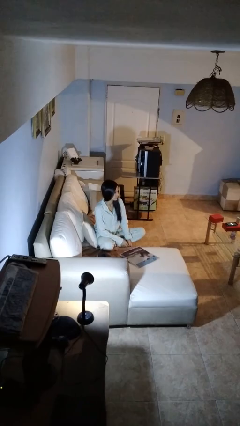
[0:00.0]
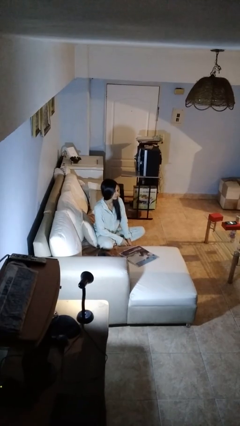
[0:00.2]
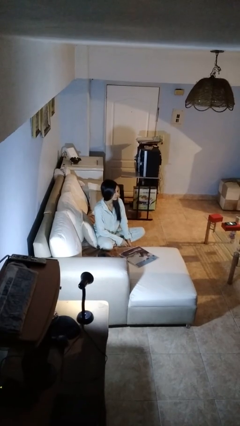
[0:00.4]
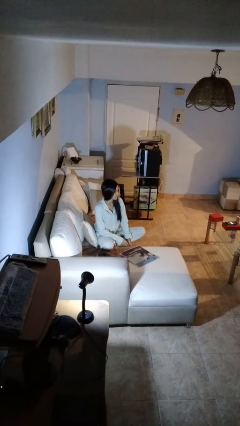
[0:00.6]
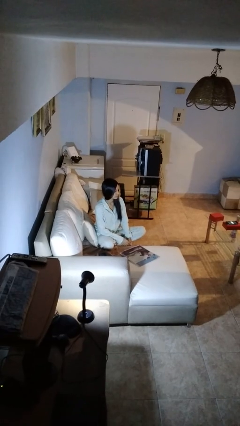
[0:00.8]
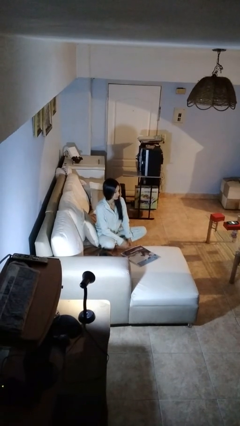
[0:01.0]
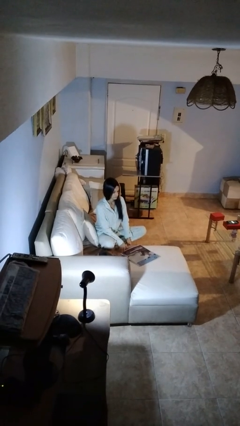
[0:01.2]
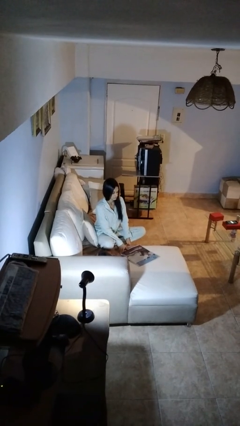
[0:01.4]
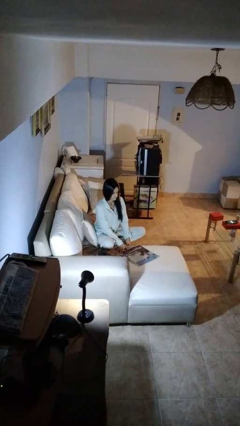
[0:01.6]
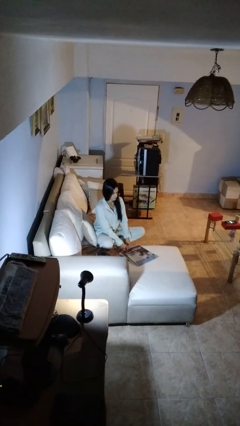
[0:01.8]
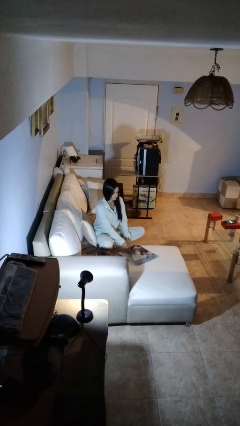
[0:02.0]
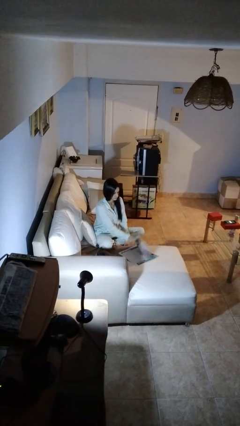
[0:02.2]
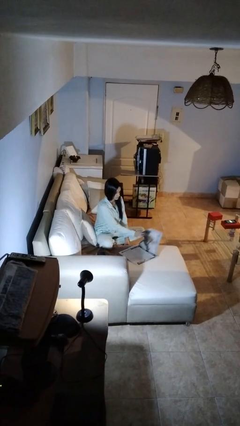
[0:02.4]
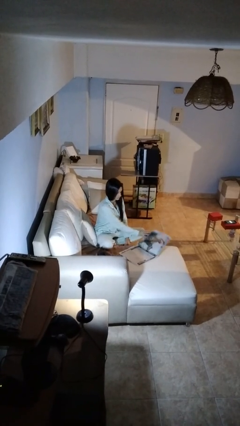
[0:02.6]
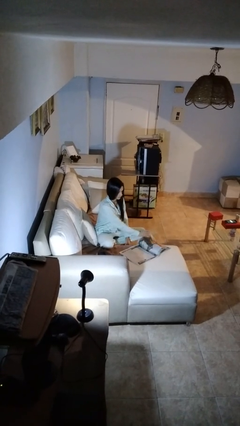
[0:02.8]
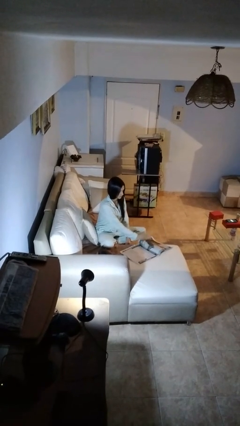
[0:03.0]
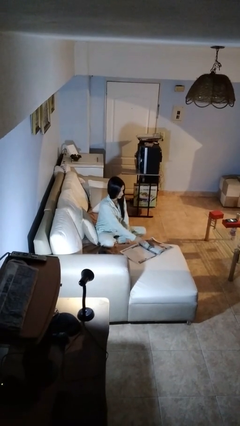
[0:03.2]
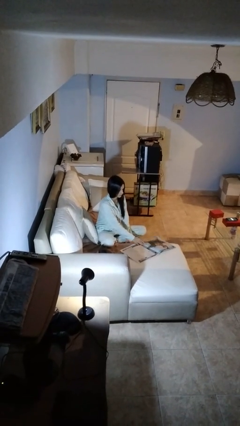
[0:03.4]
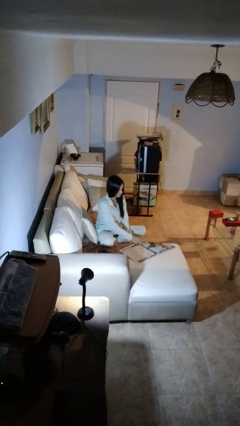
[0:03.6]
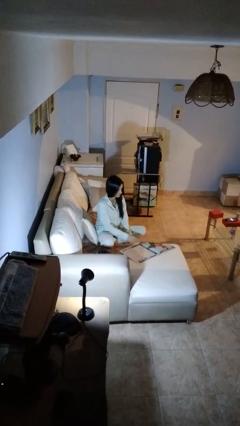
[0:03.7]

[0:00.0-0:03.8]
person reads newspaper

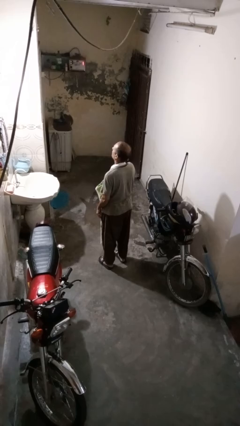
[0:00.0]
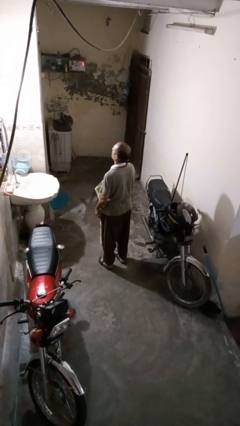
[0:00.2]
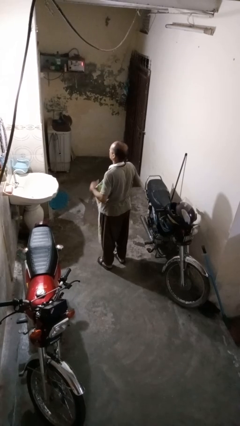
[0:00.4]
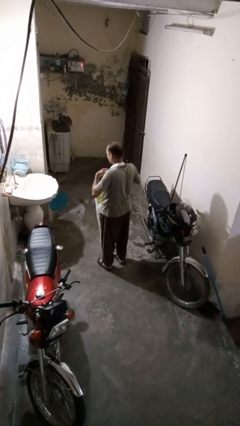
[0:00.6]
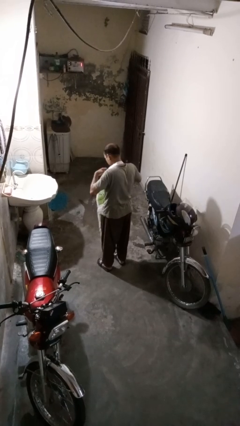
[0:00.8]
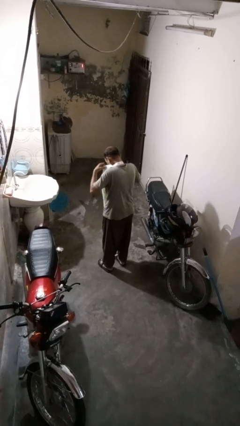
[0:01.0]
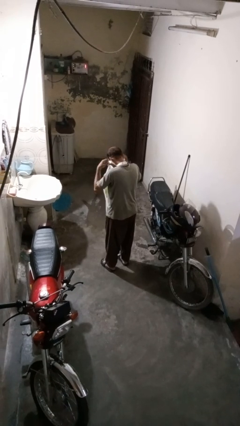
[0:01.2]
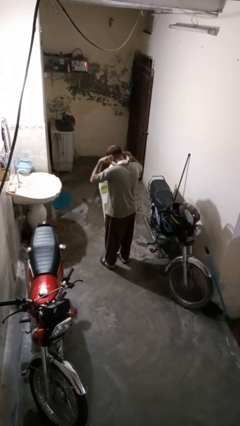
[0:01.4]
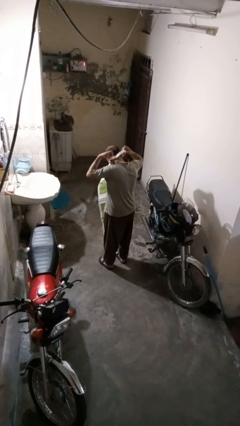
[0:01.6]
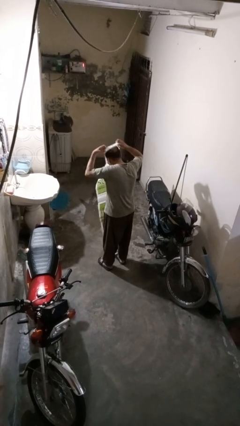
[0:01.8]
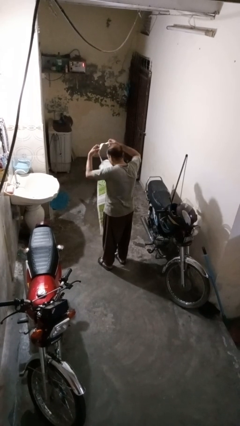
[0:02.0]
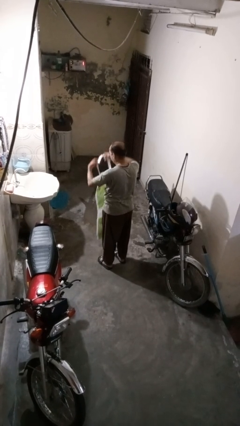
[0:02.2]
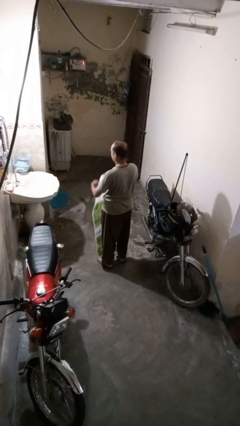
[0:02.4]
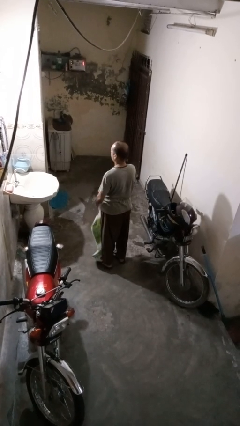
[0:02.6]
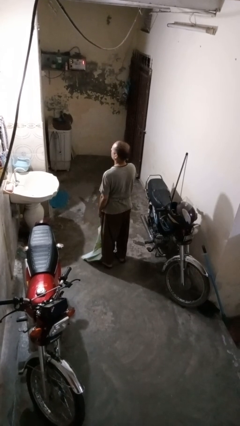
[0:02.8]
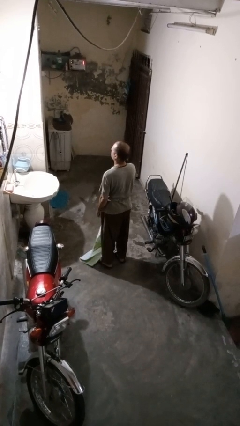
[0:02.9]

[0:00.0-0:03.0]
person takes off apron

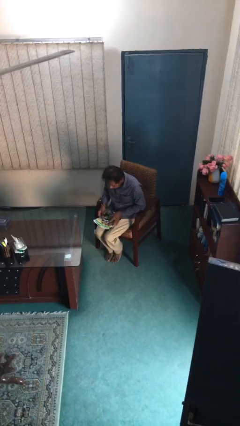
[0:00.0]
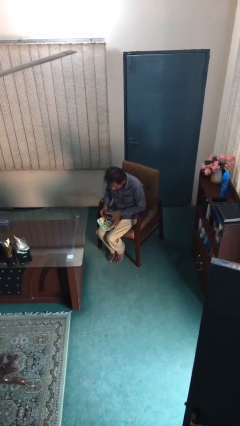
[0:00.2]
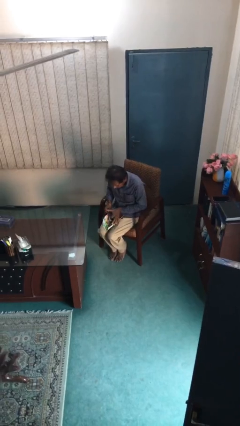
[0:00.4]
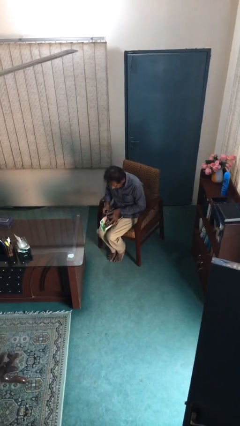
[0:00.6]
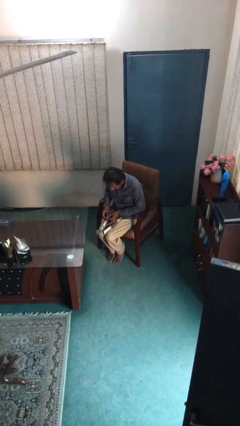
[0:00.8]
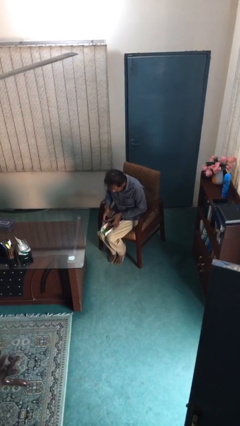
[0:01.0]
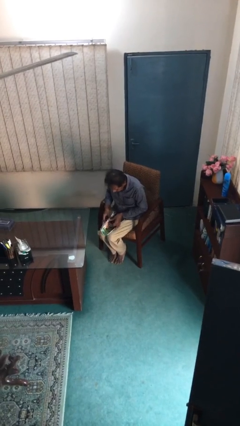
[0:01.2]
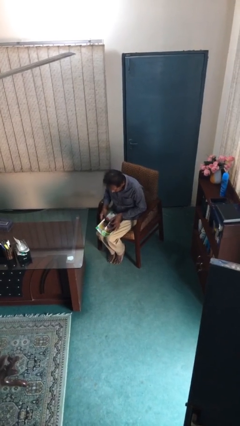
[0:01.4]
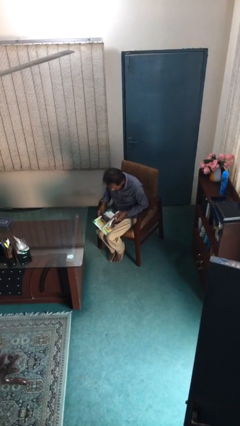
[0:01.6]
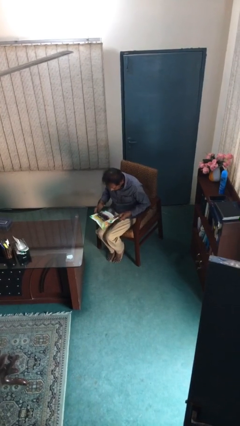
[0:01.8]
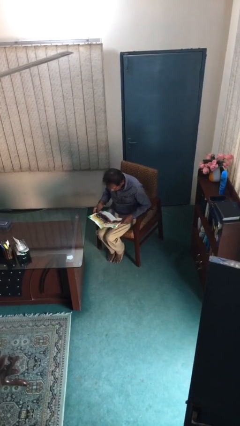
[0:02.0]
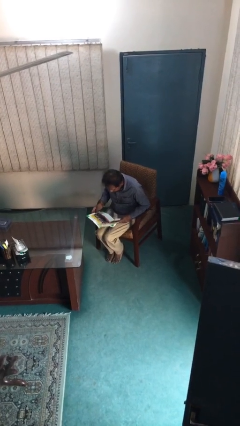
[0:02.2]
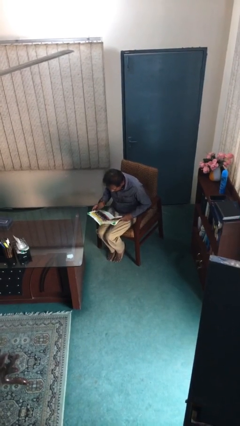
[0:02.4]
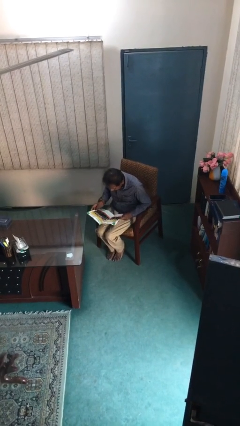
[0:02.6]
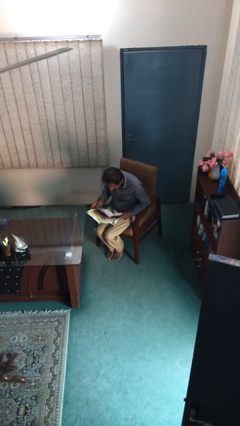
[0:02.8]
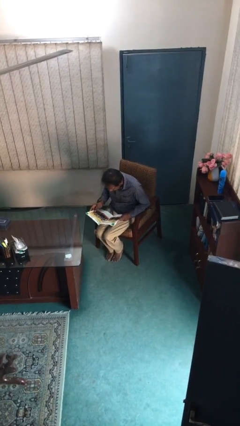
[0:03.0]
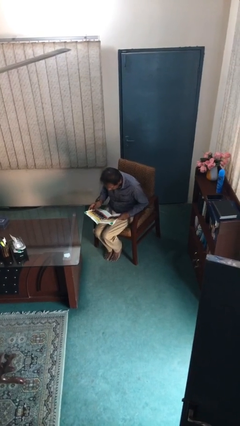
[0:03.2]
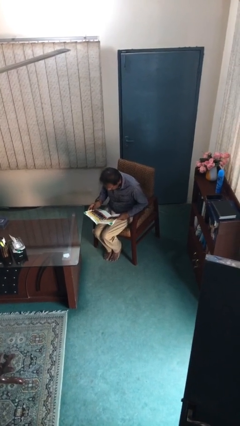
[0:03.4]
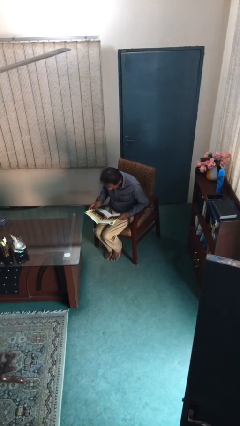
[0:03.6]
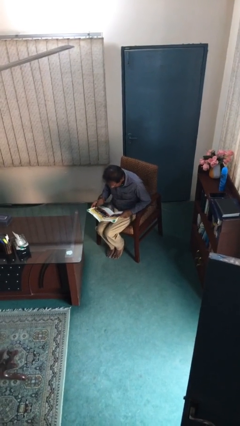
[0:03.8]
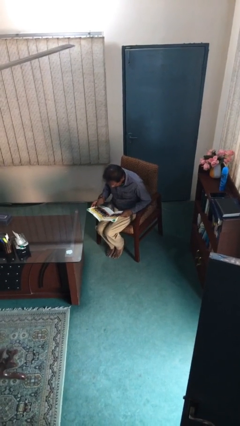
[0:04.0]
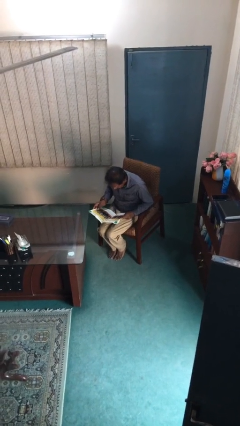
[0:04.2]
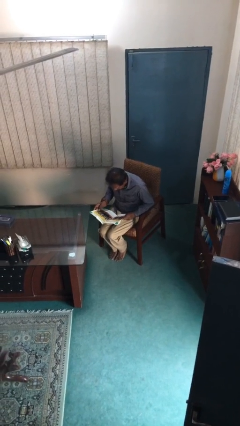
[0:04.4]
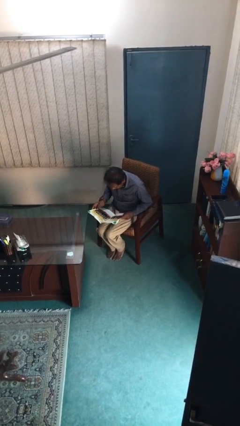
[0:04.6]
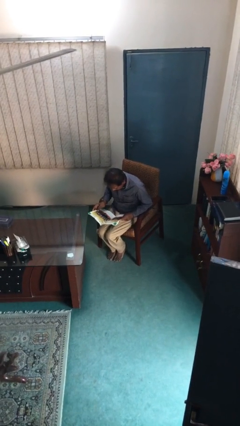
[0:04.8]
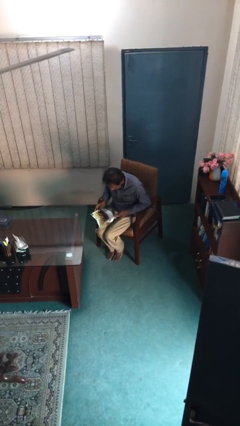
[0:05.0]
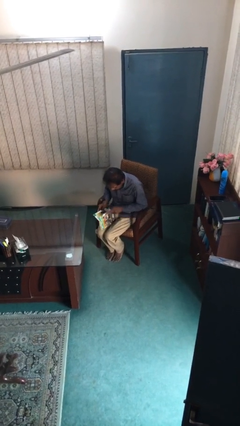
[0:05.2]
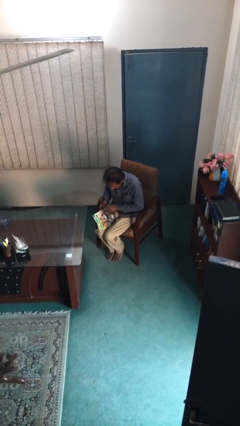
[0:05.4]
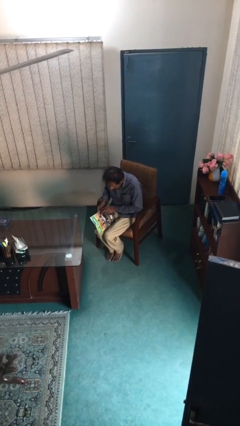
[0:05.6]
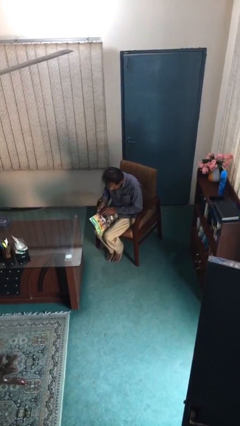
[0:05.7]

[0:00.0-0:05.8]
person reads document

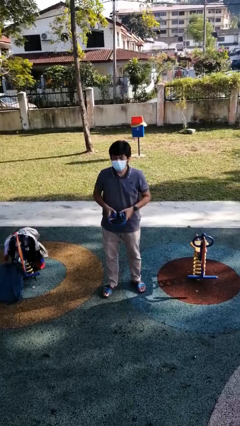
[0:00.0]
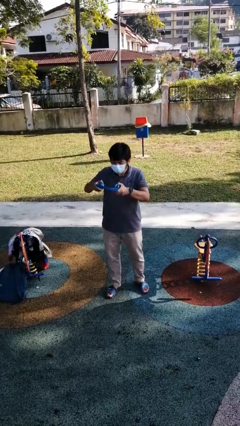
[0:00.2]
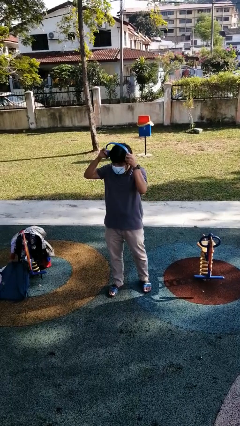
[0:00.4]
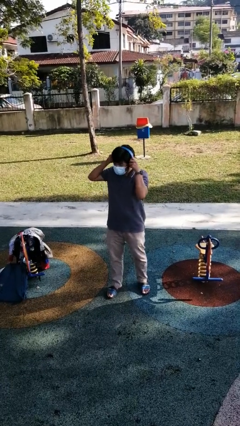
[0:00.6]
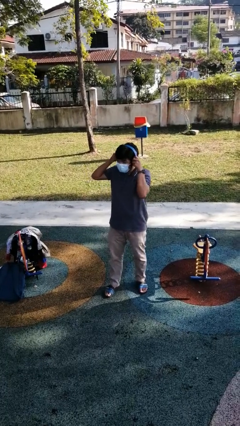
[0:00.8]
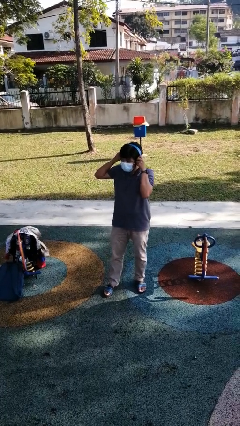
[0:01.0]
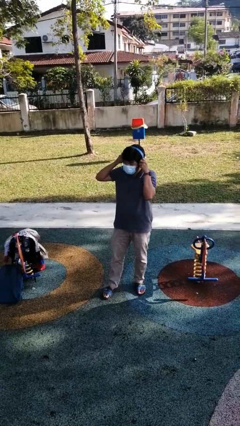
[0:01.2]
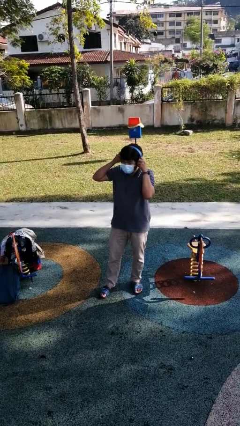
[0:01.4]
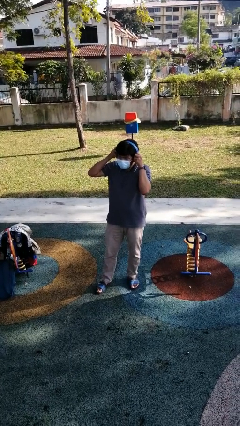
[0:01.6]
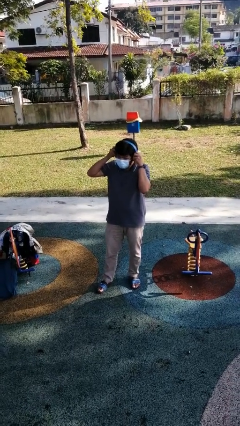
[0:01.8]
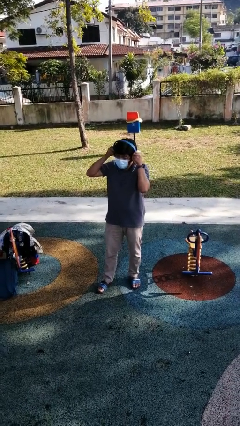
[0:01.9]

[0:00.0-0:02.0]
person puts on headphones

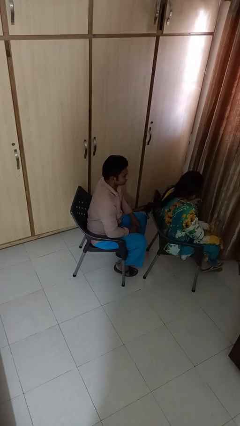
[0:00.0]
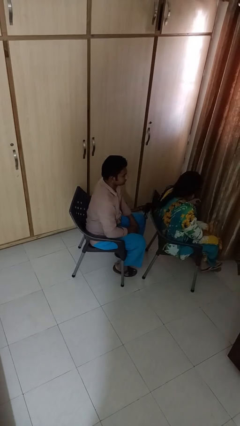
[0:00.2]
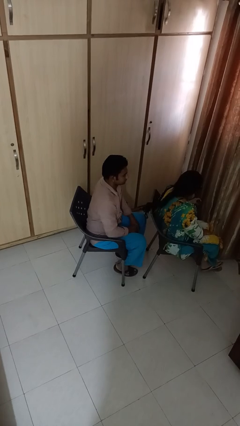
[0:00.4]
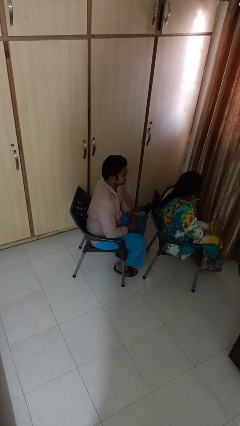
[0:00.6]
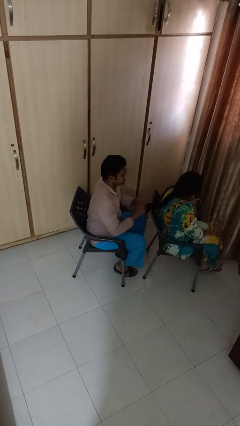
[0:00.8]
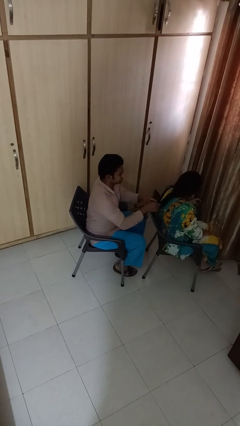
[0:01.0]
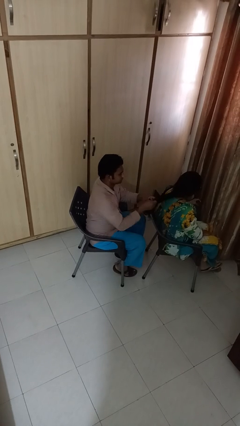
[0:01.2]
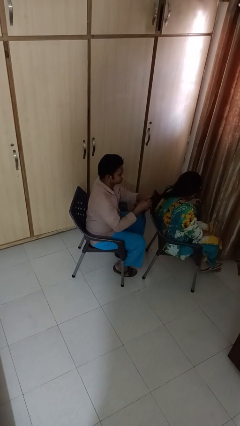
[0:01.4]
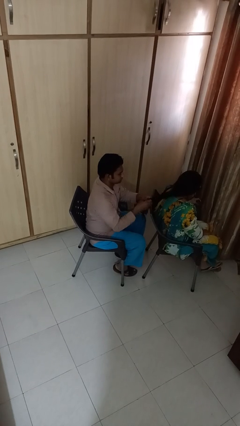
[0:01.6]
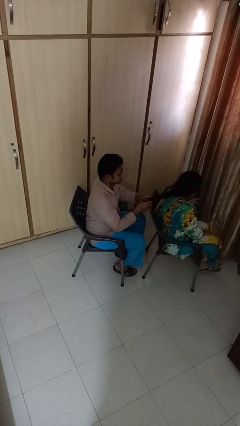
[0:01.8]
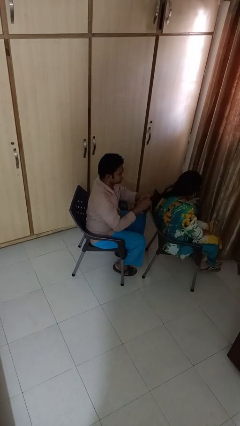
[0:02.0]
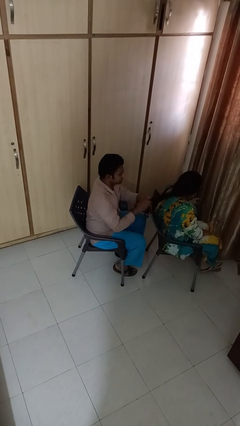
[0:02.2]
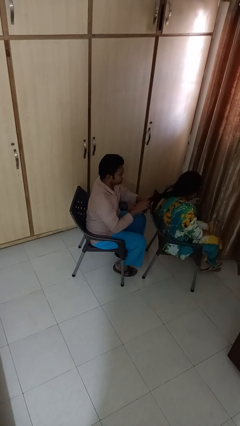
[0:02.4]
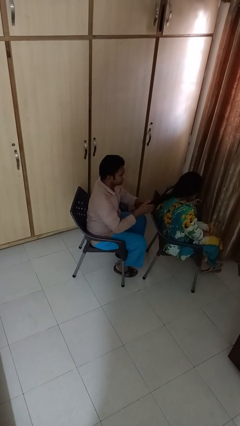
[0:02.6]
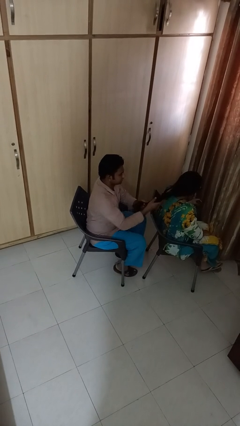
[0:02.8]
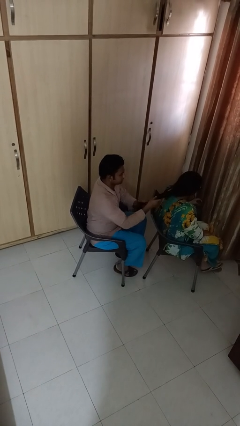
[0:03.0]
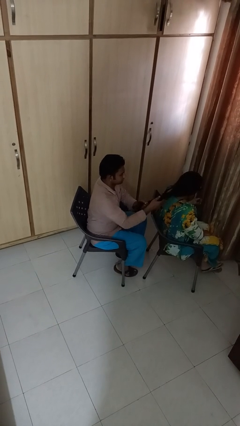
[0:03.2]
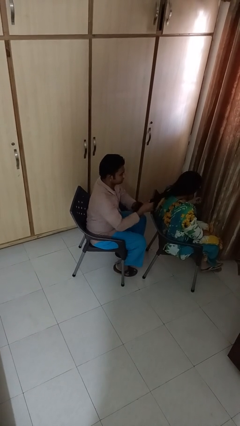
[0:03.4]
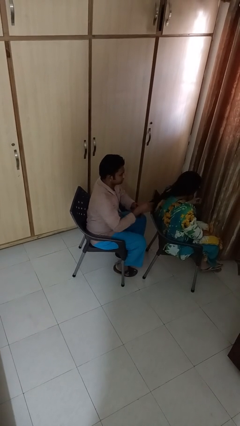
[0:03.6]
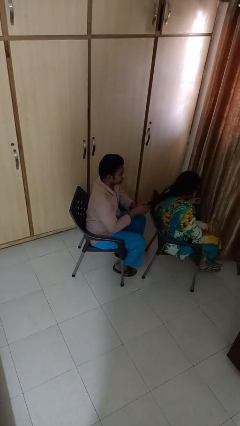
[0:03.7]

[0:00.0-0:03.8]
person braids hair of person
